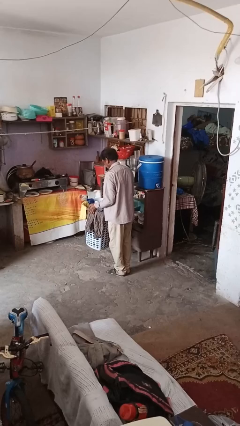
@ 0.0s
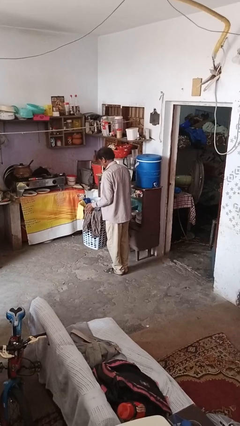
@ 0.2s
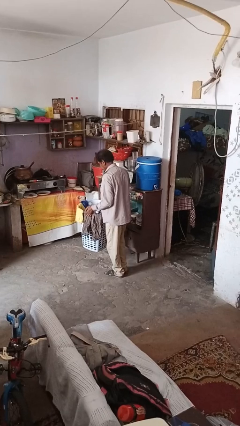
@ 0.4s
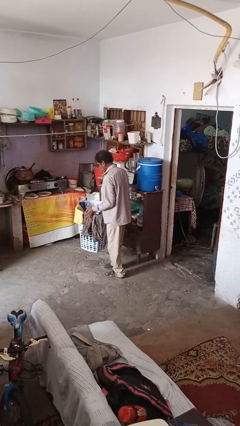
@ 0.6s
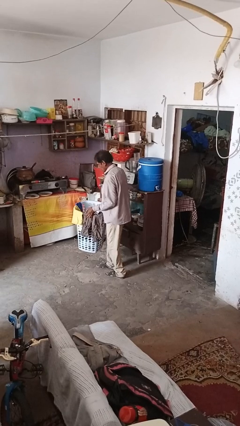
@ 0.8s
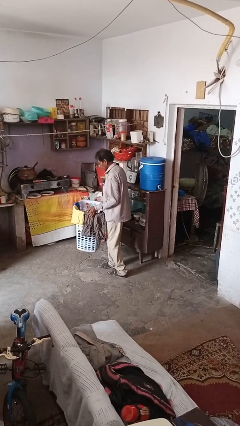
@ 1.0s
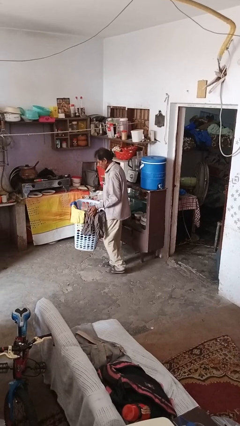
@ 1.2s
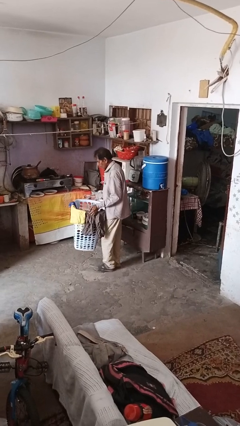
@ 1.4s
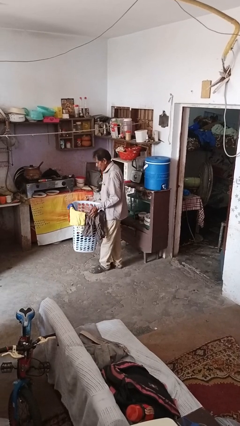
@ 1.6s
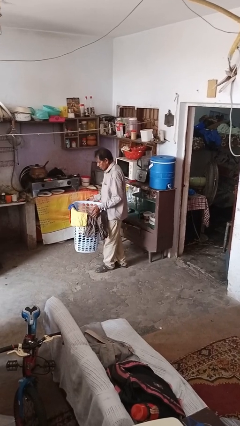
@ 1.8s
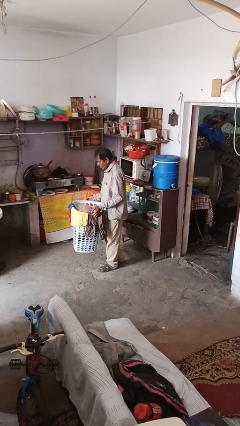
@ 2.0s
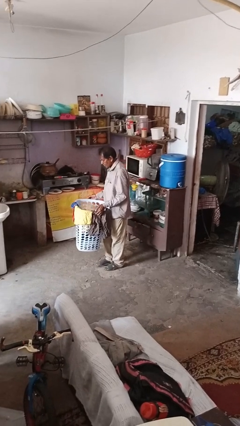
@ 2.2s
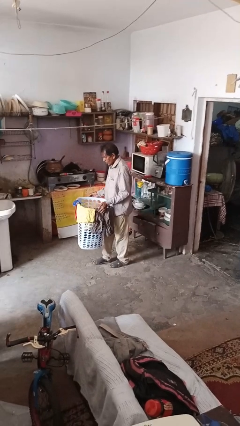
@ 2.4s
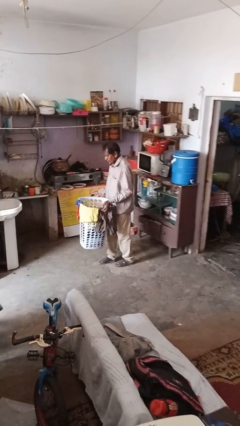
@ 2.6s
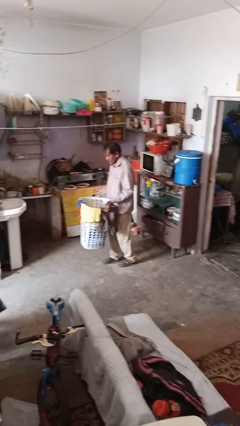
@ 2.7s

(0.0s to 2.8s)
person carries laundry basket

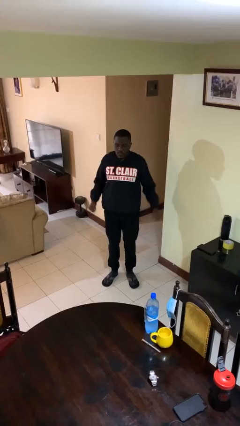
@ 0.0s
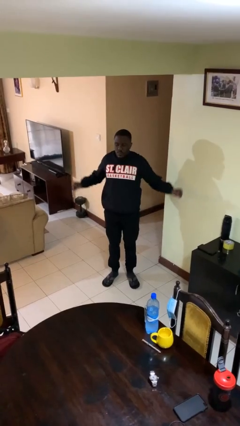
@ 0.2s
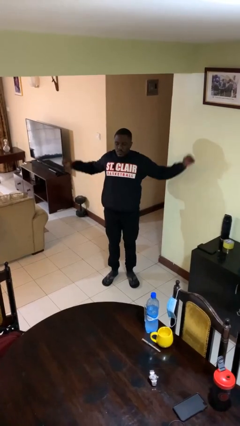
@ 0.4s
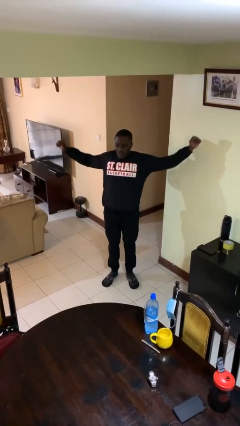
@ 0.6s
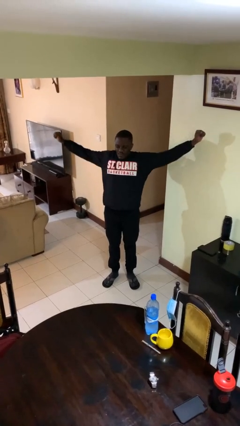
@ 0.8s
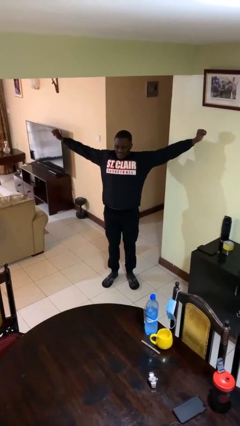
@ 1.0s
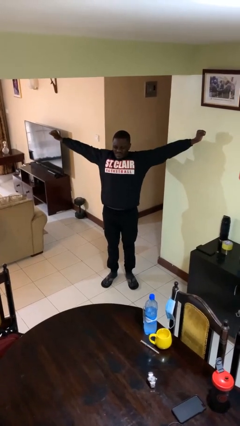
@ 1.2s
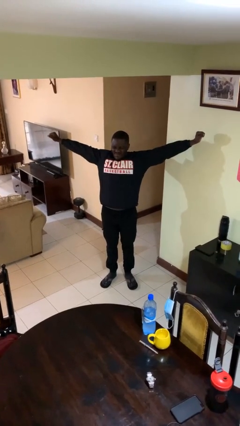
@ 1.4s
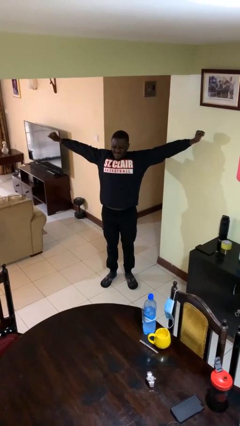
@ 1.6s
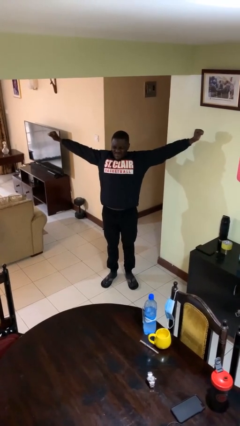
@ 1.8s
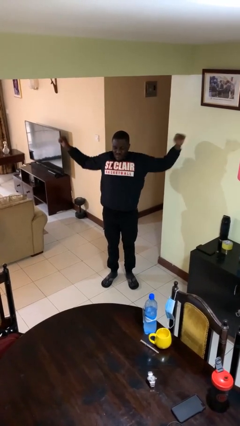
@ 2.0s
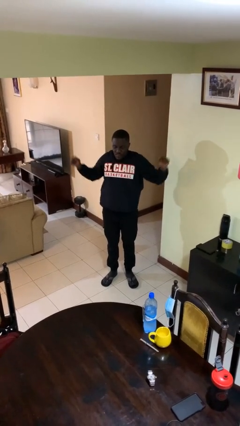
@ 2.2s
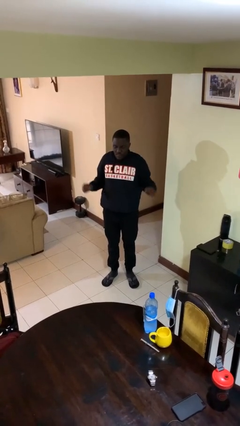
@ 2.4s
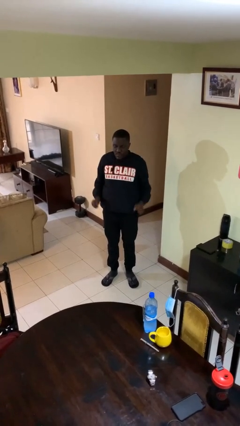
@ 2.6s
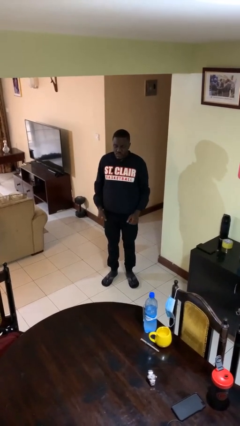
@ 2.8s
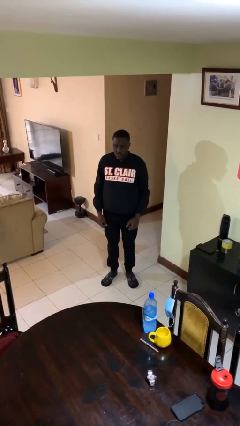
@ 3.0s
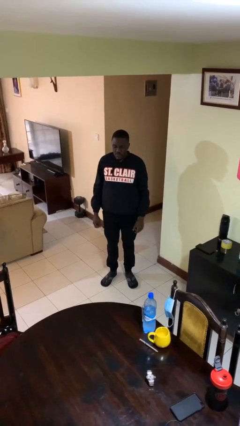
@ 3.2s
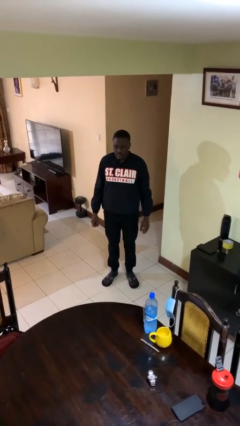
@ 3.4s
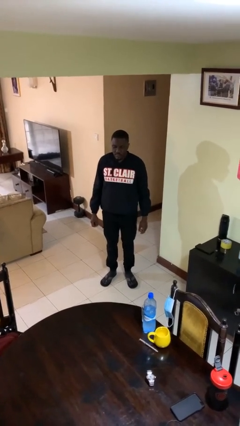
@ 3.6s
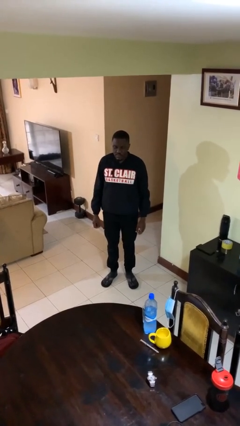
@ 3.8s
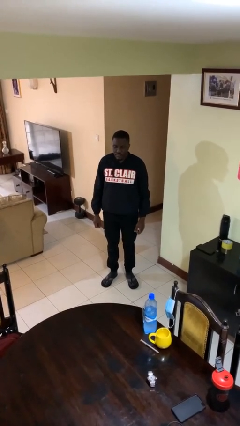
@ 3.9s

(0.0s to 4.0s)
person stretches arms to side

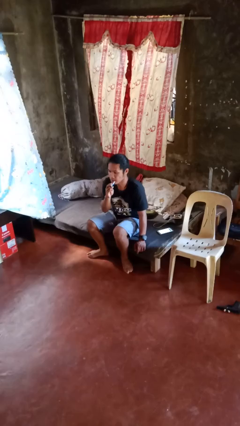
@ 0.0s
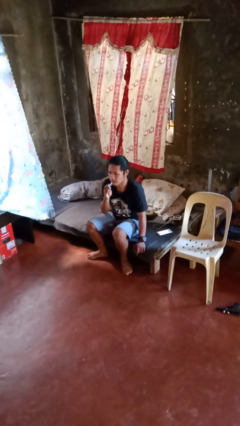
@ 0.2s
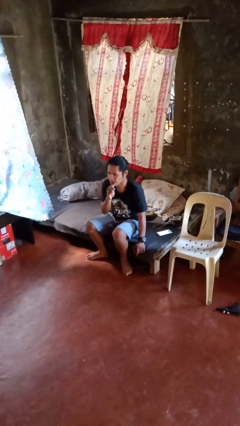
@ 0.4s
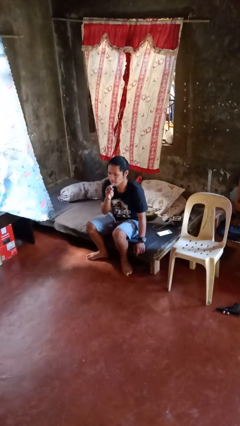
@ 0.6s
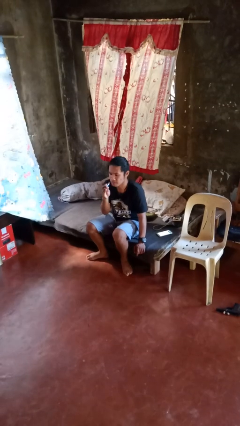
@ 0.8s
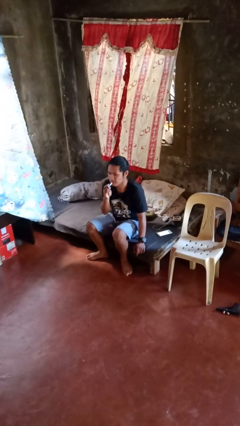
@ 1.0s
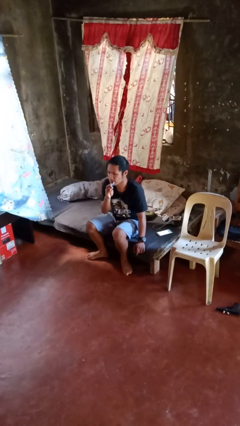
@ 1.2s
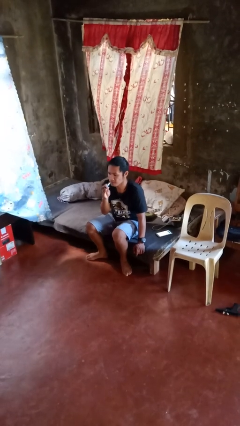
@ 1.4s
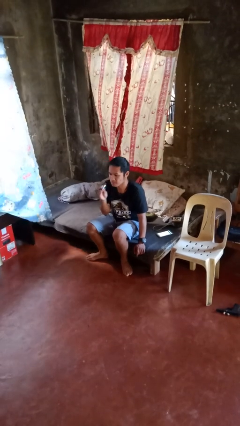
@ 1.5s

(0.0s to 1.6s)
person applies lip makeup

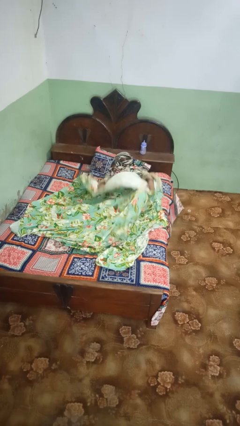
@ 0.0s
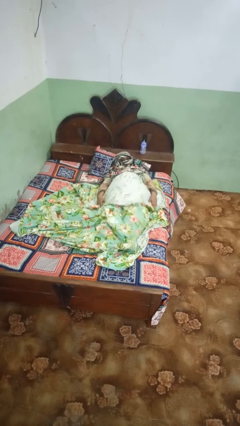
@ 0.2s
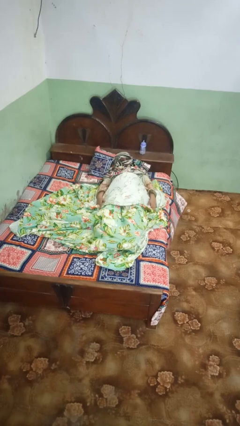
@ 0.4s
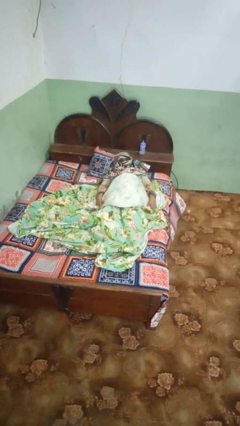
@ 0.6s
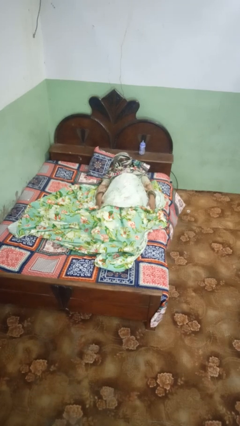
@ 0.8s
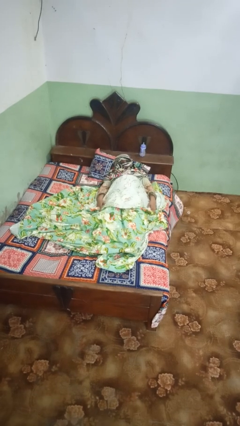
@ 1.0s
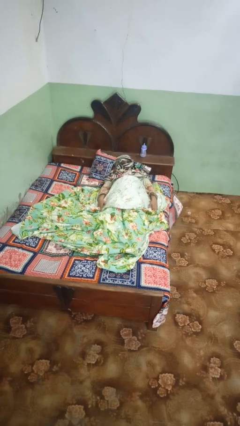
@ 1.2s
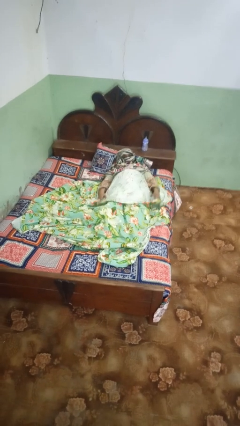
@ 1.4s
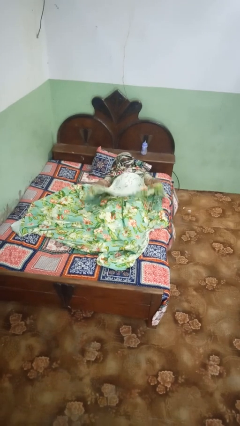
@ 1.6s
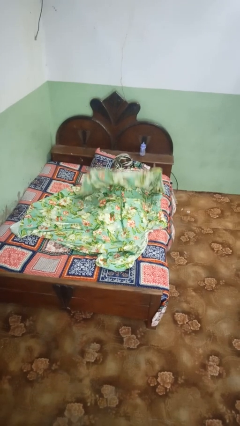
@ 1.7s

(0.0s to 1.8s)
person uncovers with bedsheets

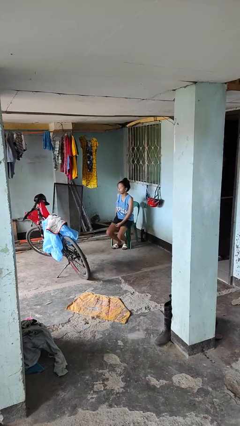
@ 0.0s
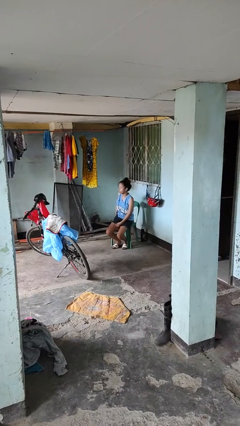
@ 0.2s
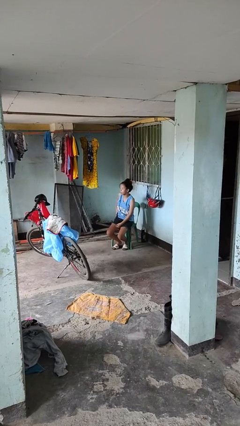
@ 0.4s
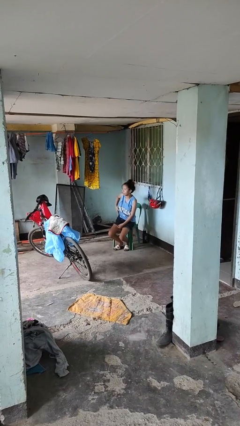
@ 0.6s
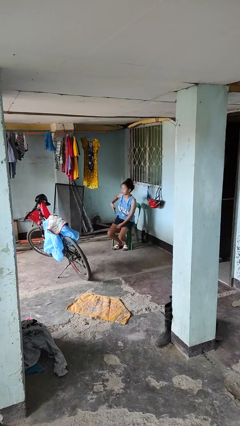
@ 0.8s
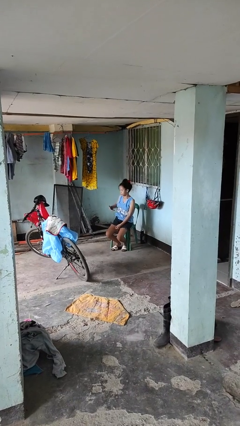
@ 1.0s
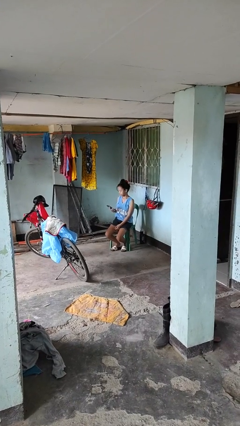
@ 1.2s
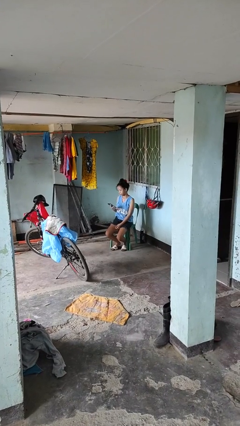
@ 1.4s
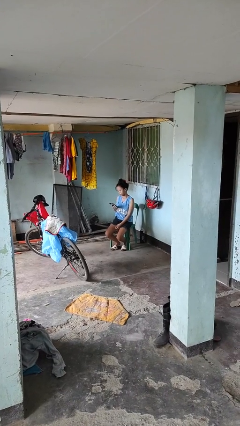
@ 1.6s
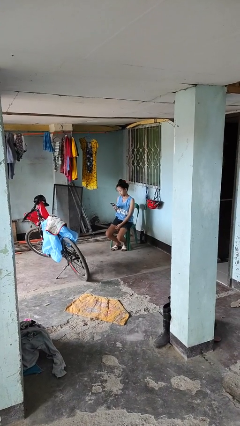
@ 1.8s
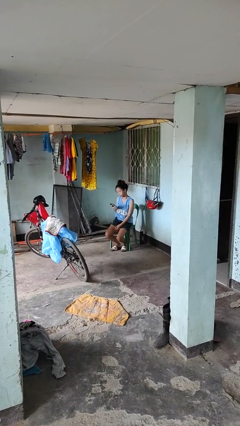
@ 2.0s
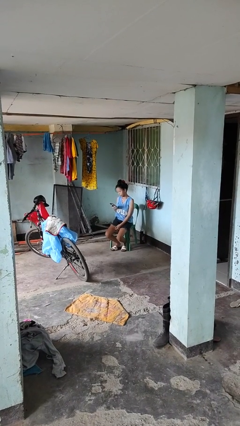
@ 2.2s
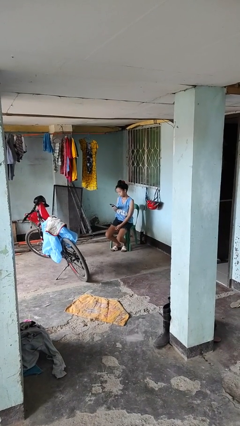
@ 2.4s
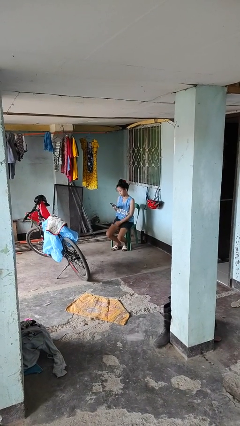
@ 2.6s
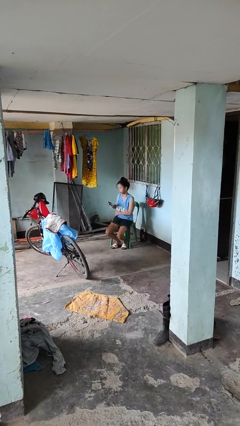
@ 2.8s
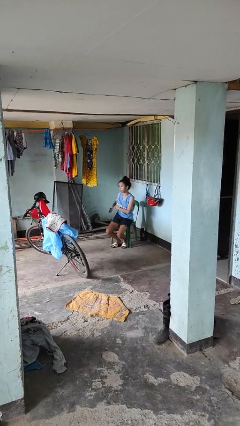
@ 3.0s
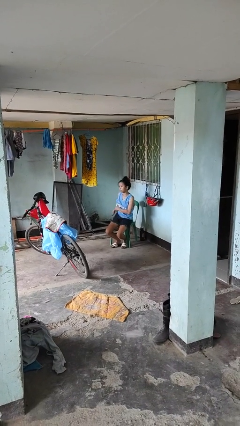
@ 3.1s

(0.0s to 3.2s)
person takes phone from pocket

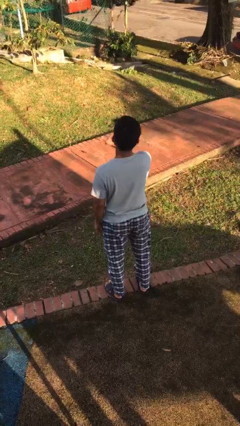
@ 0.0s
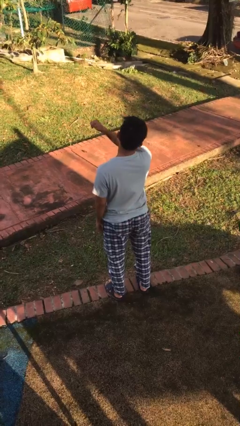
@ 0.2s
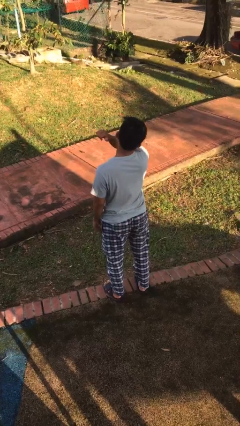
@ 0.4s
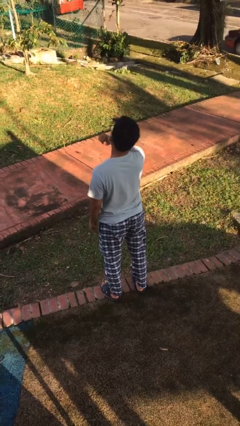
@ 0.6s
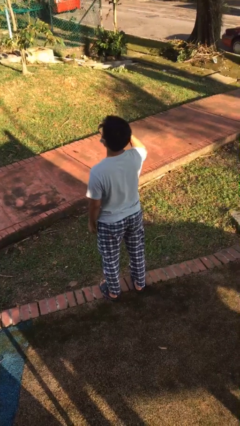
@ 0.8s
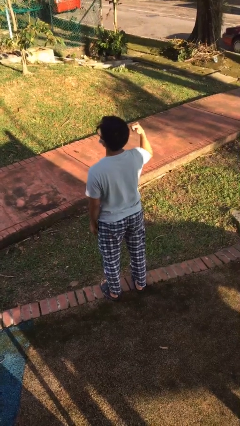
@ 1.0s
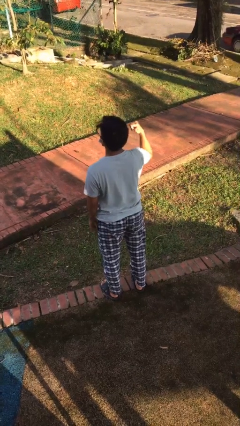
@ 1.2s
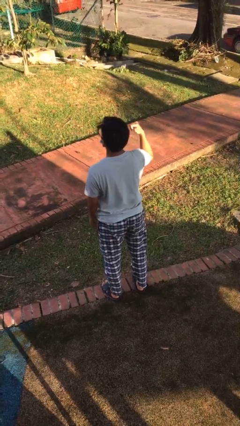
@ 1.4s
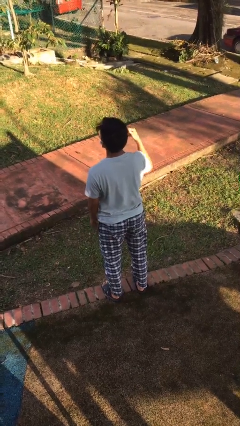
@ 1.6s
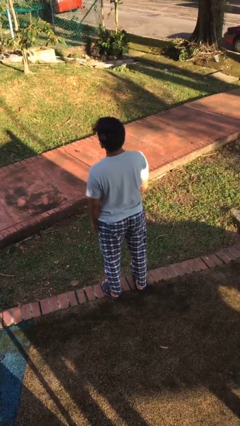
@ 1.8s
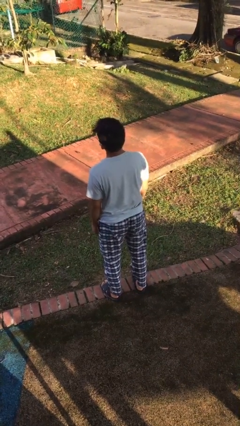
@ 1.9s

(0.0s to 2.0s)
person gestures cut

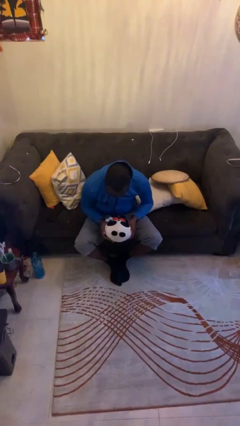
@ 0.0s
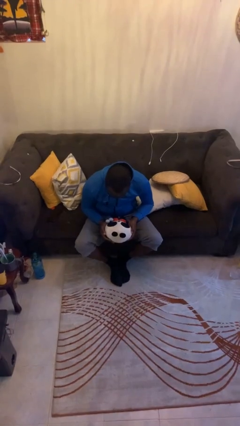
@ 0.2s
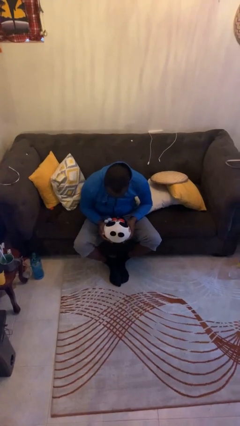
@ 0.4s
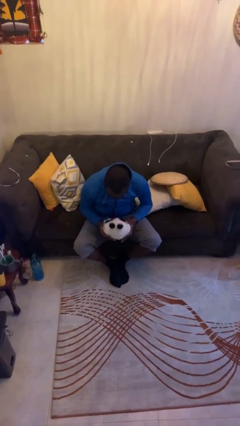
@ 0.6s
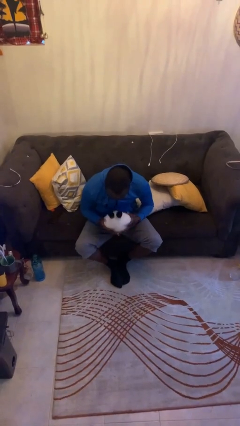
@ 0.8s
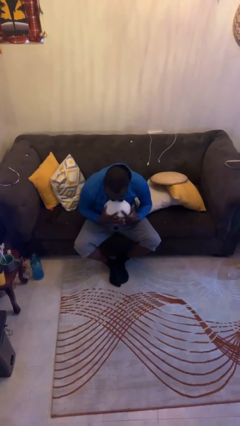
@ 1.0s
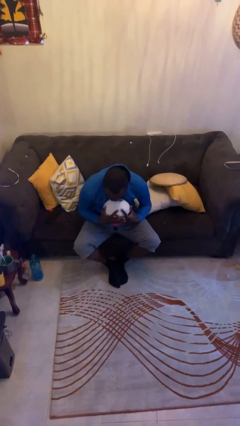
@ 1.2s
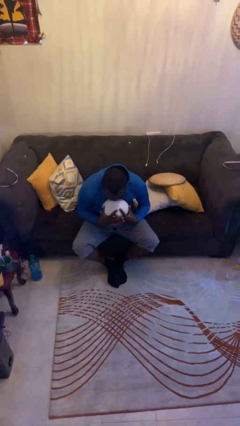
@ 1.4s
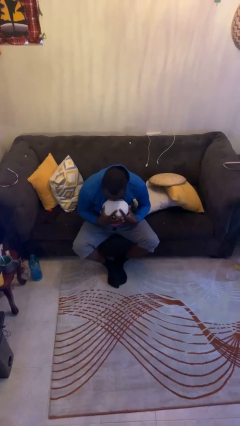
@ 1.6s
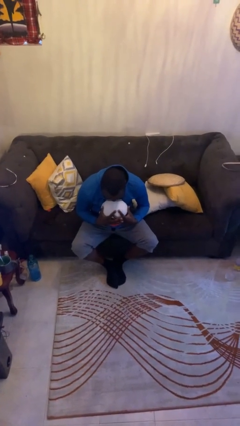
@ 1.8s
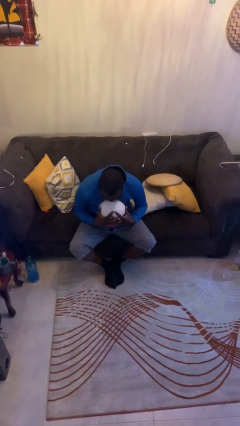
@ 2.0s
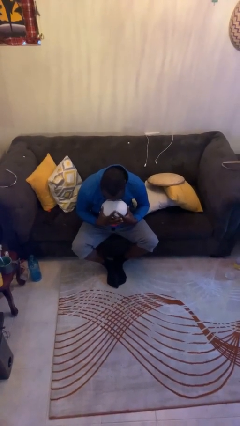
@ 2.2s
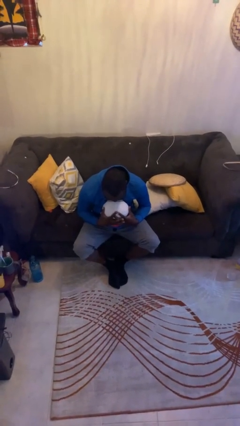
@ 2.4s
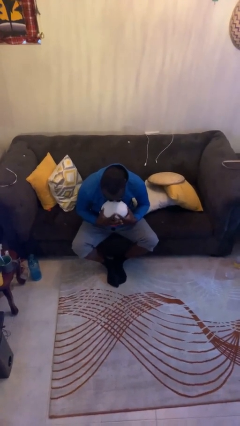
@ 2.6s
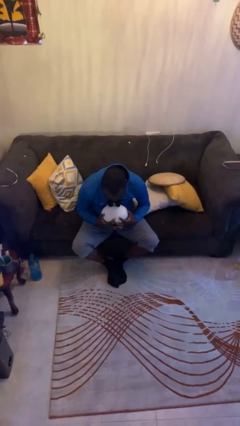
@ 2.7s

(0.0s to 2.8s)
person hugs stuffed animal
